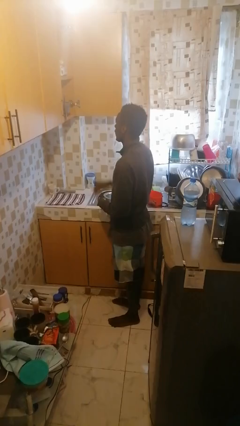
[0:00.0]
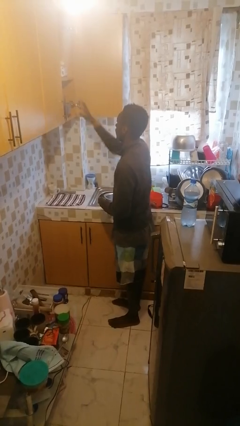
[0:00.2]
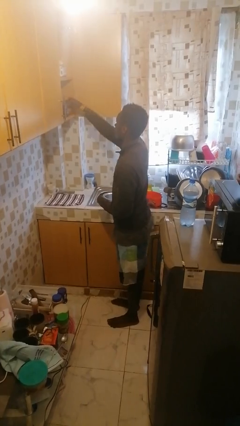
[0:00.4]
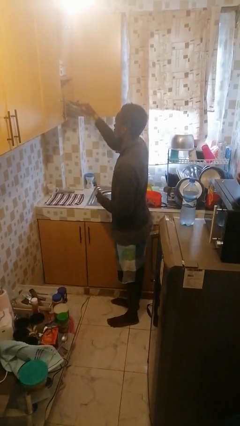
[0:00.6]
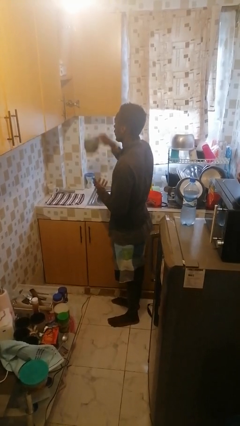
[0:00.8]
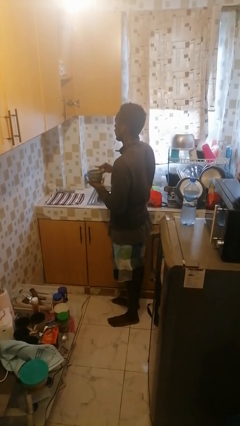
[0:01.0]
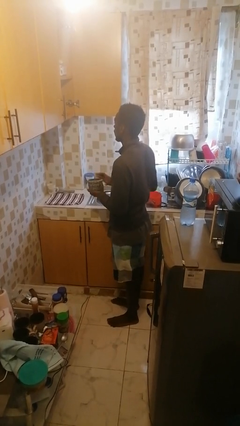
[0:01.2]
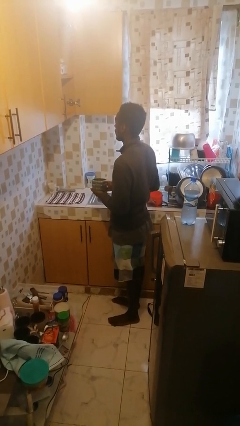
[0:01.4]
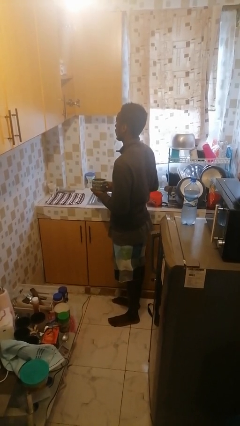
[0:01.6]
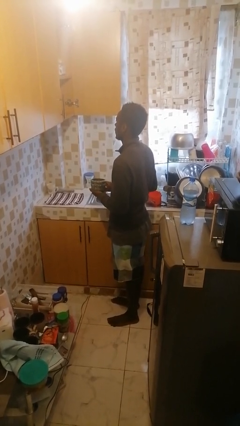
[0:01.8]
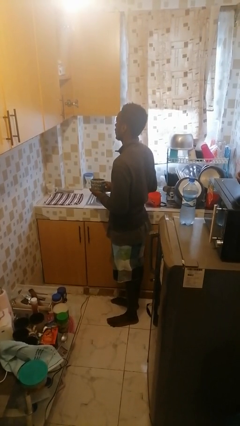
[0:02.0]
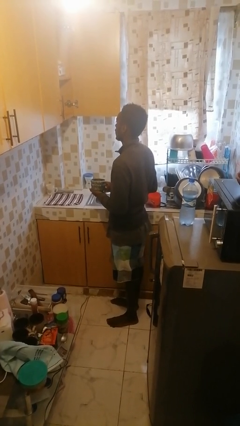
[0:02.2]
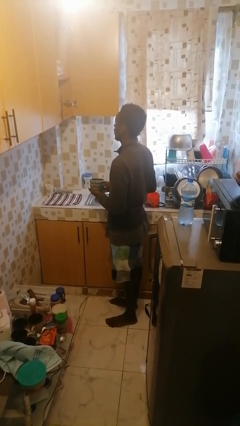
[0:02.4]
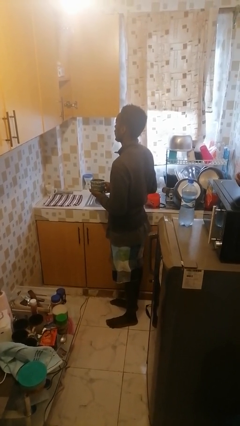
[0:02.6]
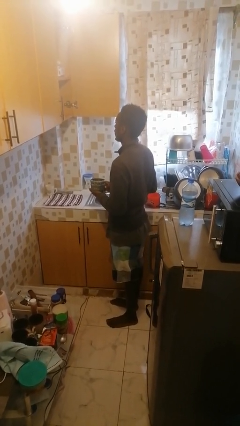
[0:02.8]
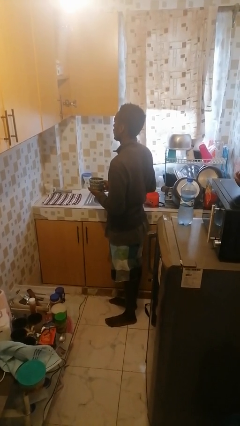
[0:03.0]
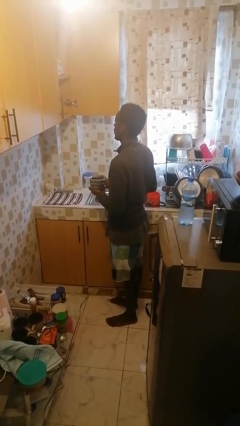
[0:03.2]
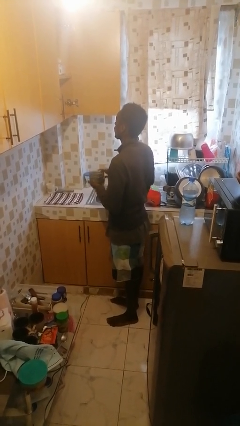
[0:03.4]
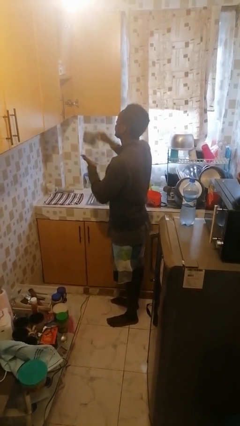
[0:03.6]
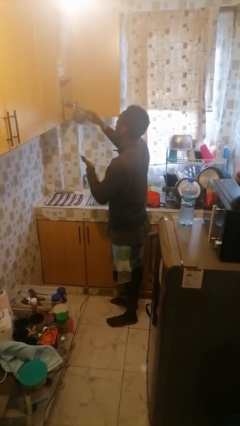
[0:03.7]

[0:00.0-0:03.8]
person picks up object from cabinet

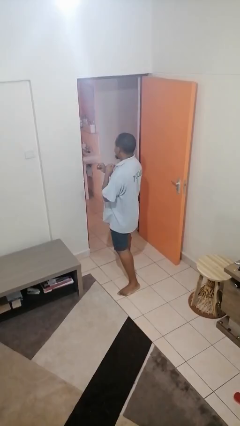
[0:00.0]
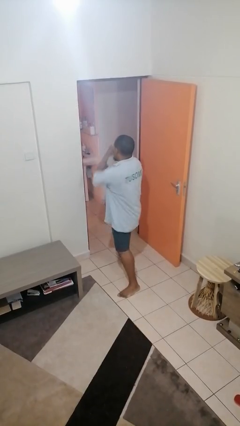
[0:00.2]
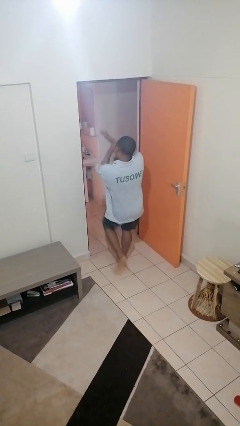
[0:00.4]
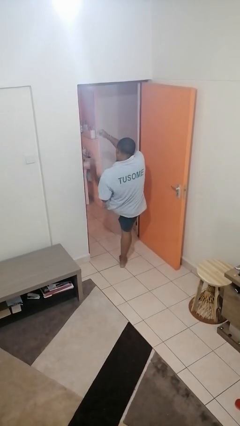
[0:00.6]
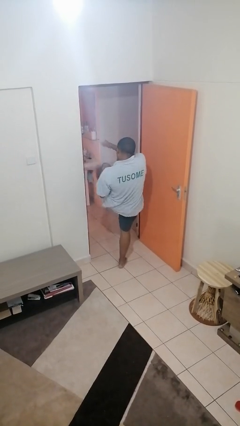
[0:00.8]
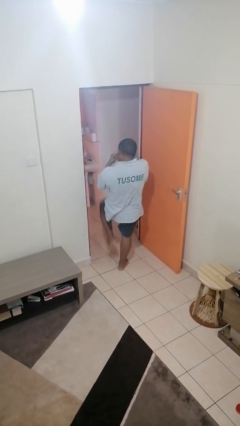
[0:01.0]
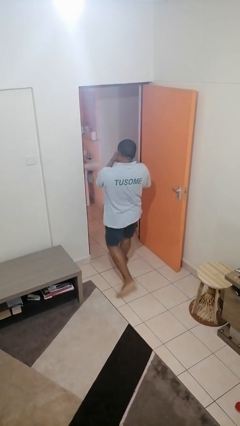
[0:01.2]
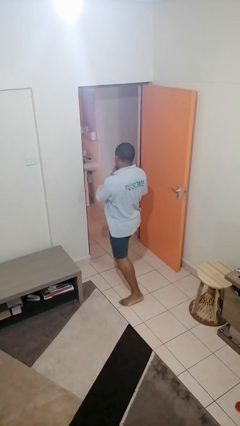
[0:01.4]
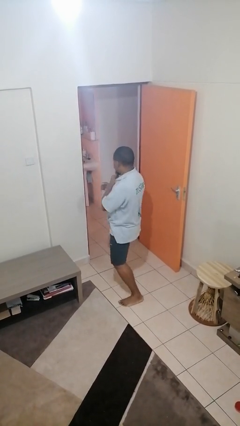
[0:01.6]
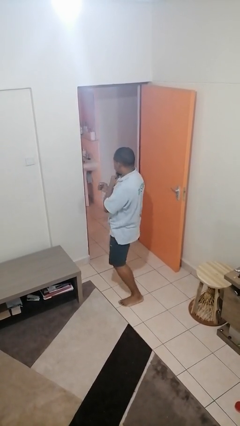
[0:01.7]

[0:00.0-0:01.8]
person karate kicks

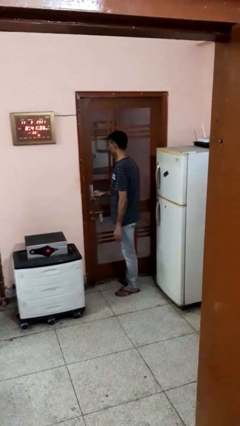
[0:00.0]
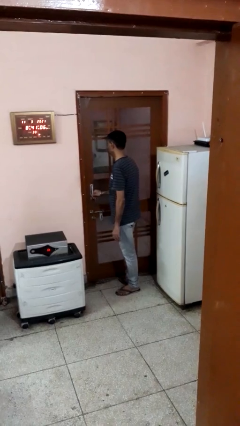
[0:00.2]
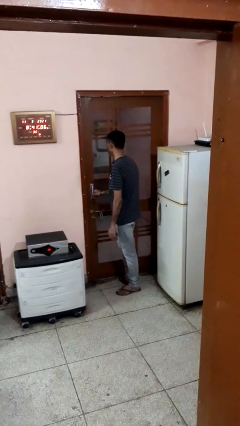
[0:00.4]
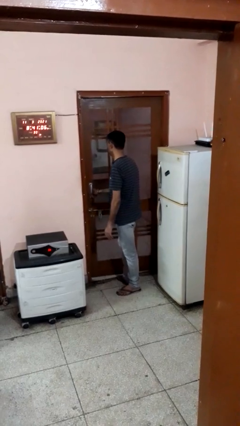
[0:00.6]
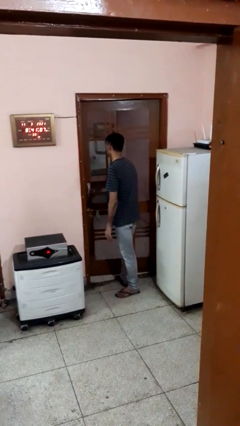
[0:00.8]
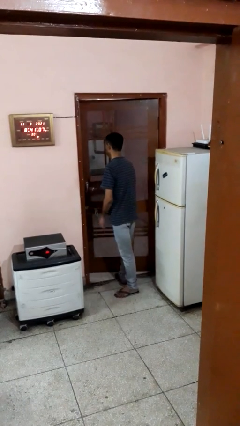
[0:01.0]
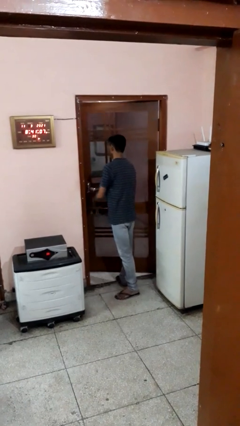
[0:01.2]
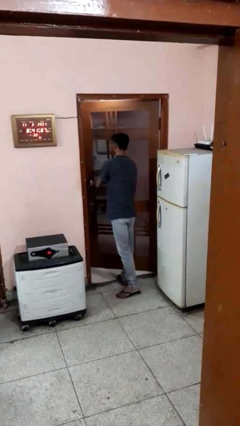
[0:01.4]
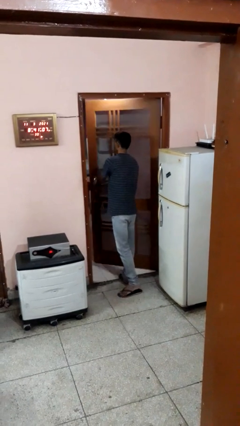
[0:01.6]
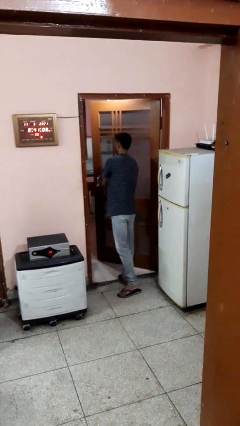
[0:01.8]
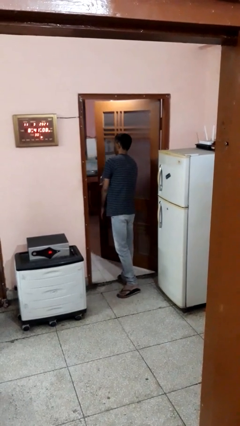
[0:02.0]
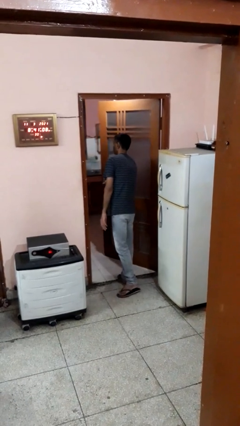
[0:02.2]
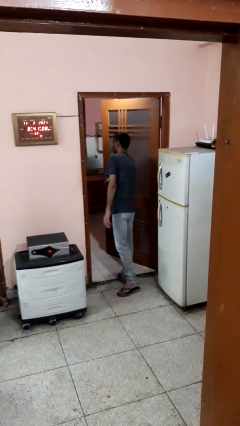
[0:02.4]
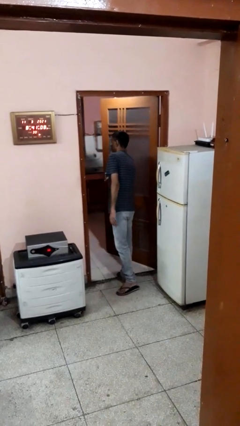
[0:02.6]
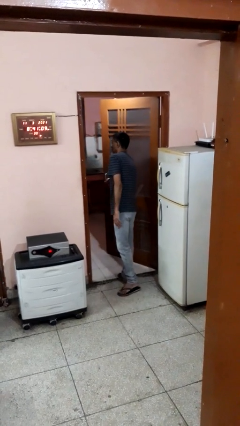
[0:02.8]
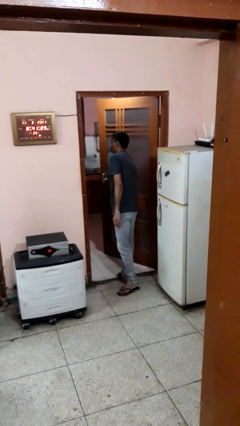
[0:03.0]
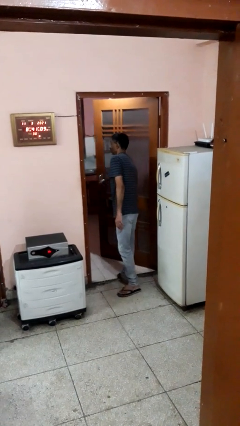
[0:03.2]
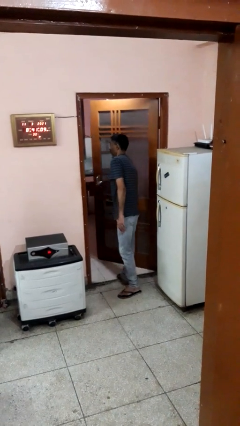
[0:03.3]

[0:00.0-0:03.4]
person opens facility door

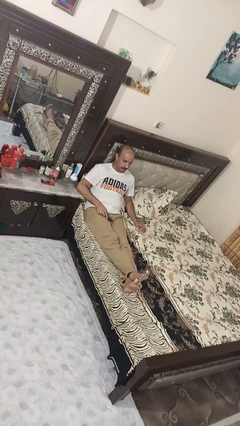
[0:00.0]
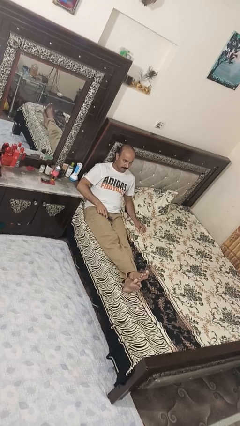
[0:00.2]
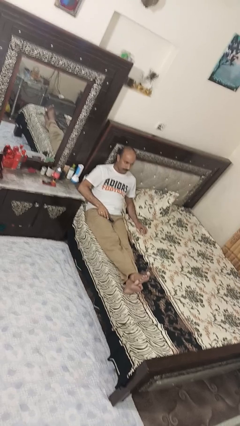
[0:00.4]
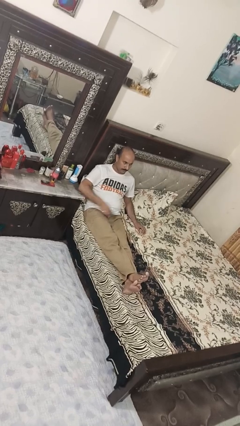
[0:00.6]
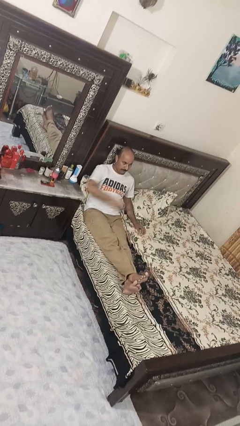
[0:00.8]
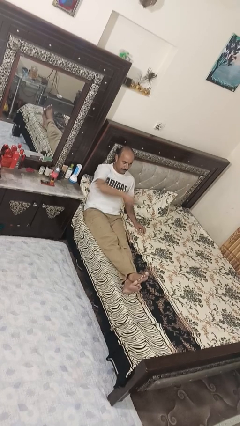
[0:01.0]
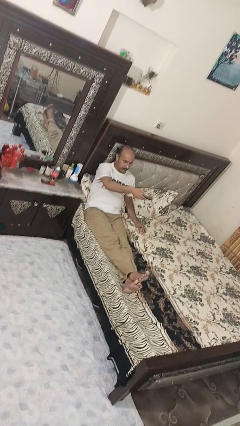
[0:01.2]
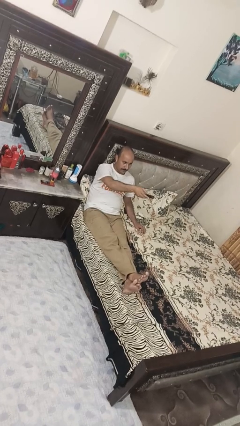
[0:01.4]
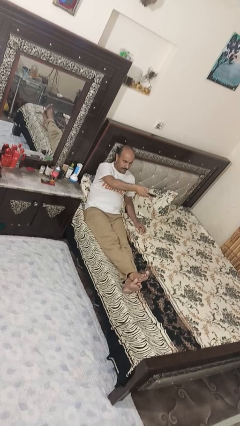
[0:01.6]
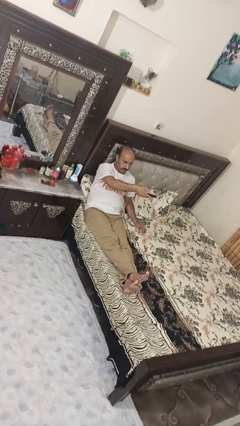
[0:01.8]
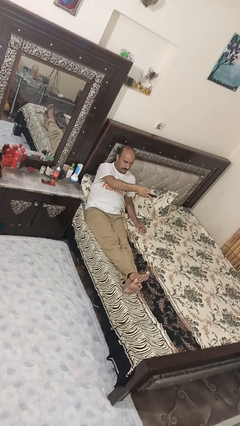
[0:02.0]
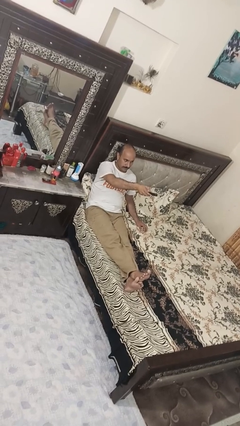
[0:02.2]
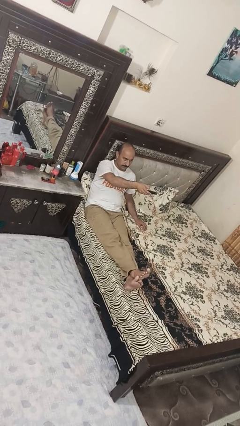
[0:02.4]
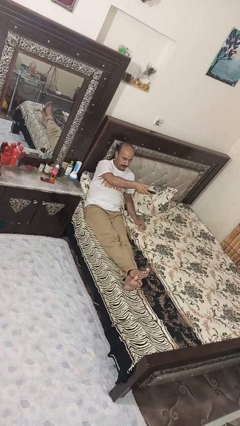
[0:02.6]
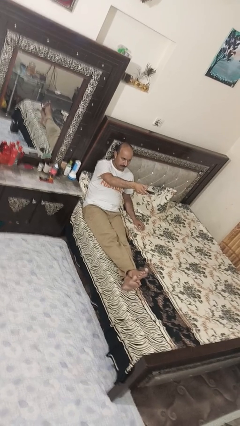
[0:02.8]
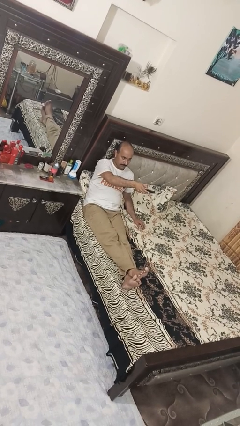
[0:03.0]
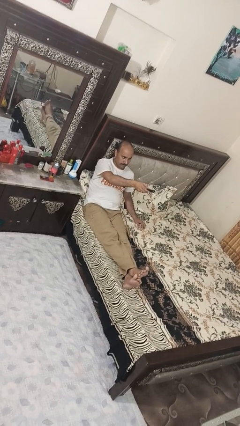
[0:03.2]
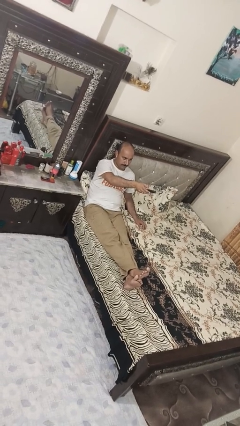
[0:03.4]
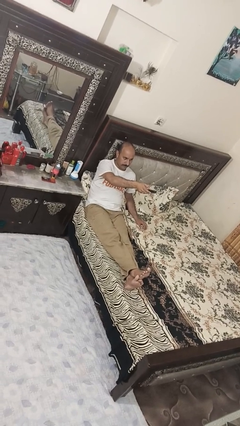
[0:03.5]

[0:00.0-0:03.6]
person uses television remote

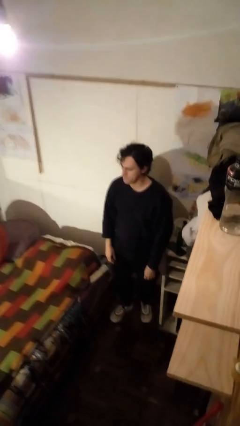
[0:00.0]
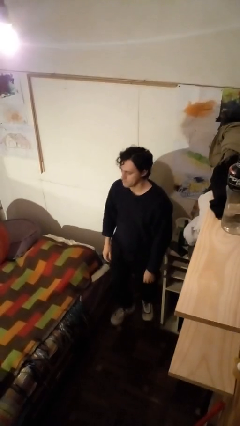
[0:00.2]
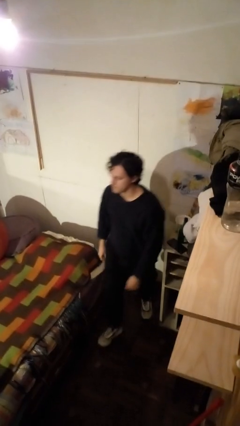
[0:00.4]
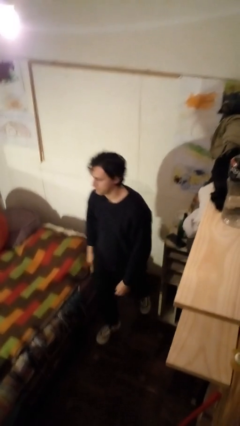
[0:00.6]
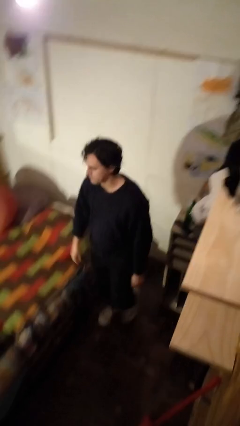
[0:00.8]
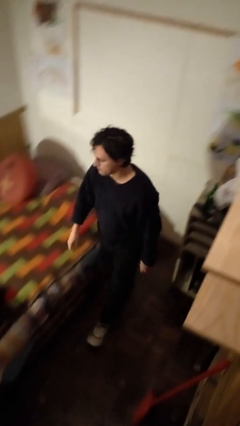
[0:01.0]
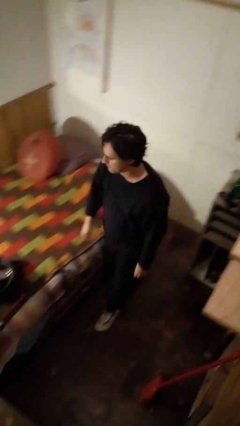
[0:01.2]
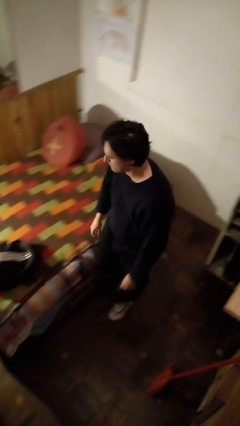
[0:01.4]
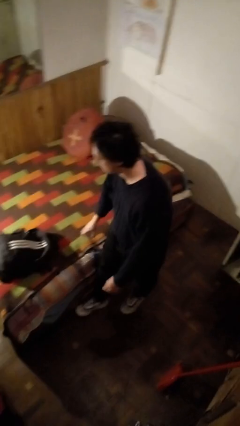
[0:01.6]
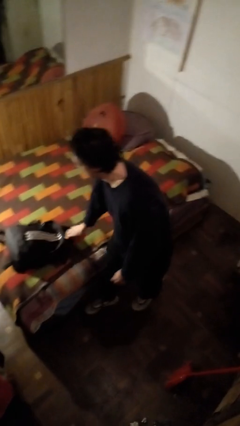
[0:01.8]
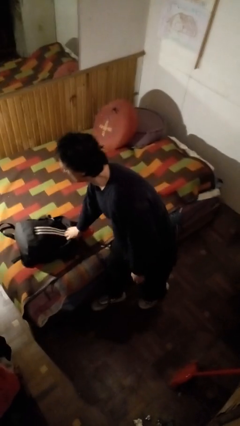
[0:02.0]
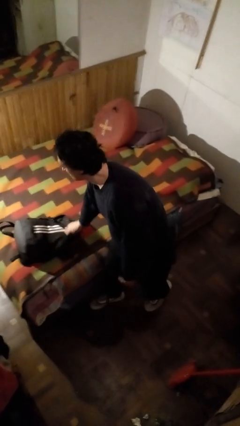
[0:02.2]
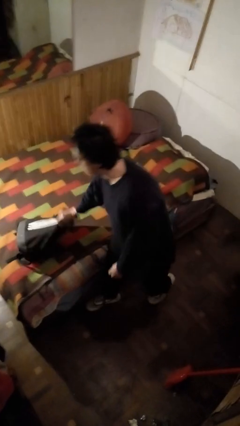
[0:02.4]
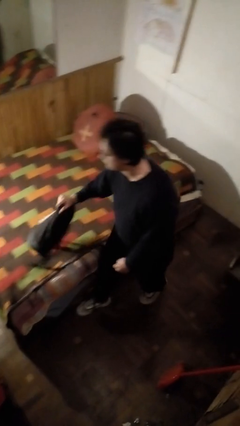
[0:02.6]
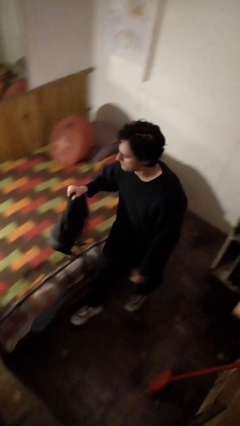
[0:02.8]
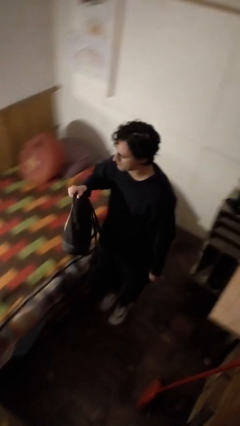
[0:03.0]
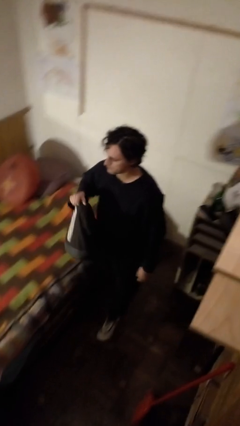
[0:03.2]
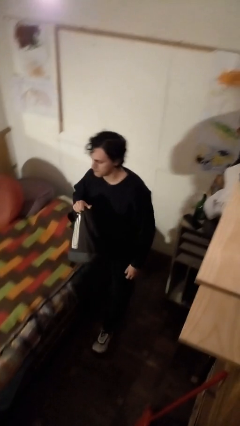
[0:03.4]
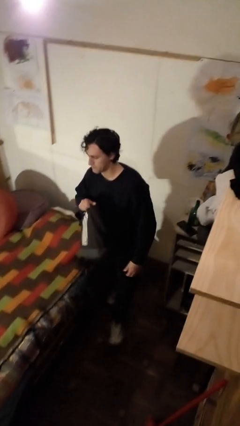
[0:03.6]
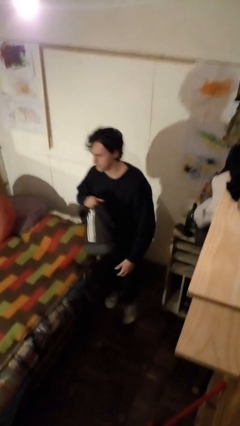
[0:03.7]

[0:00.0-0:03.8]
person picks up object from bed

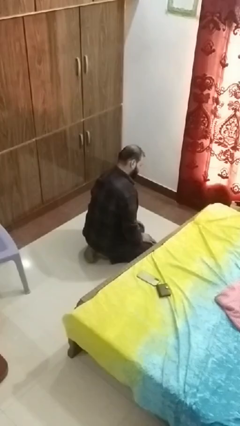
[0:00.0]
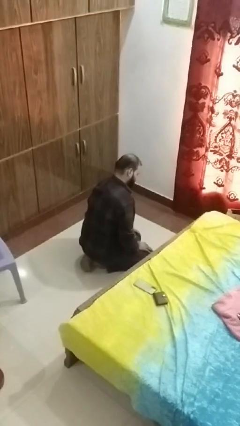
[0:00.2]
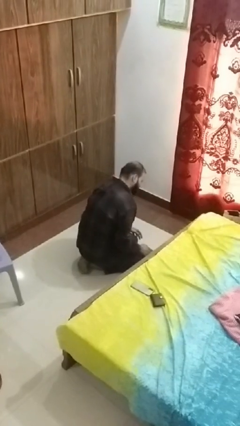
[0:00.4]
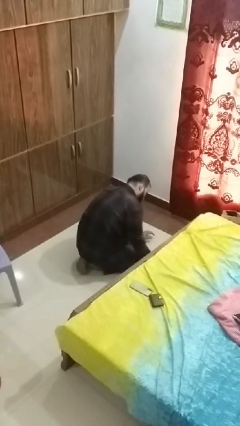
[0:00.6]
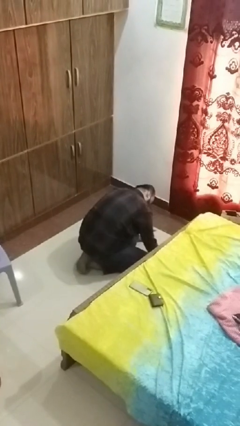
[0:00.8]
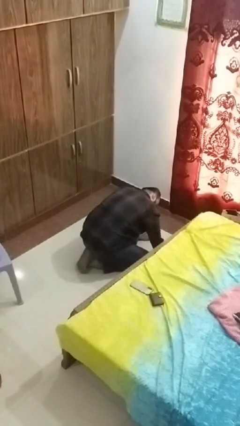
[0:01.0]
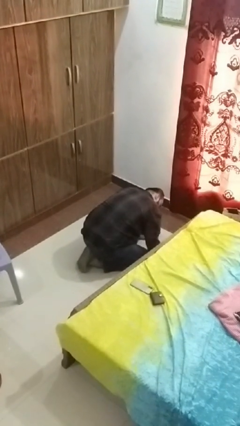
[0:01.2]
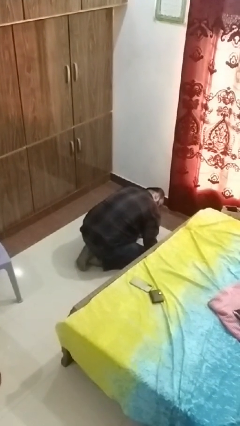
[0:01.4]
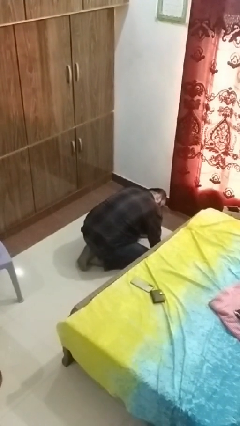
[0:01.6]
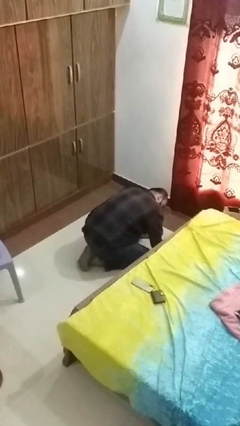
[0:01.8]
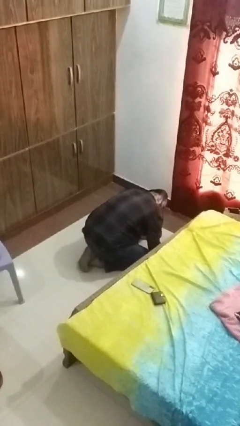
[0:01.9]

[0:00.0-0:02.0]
person searches under bed
